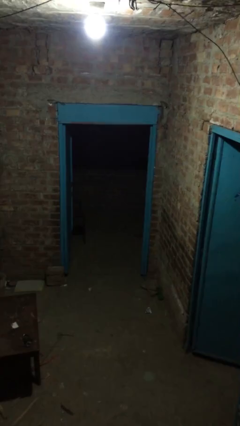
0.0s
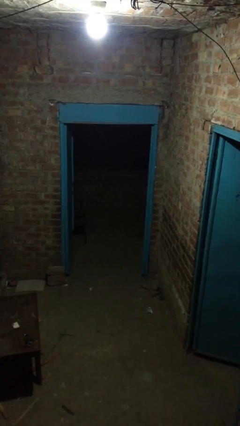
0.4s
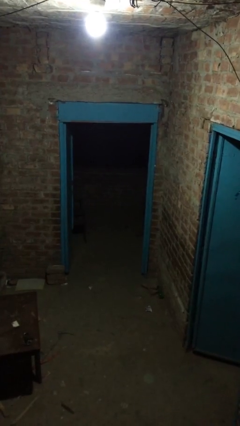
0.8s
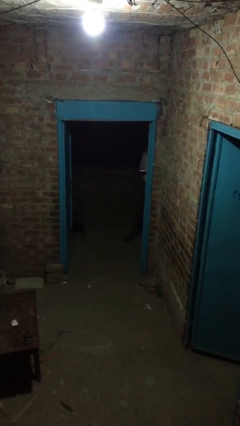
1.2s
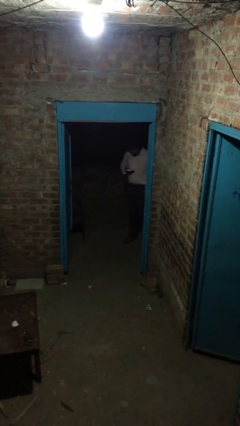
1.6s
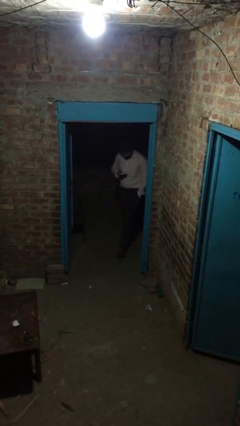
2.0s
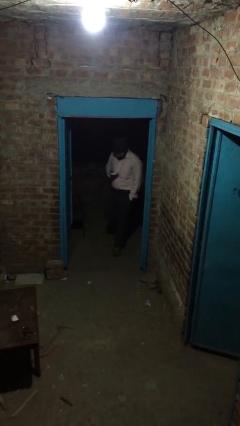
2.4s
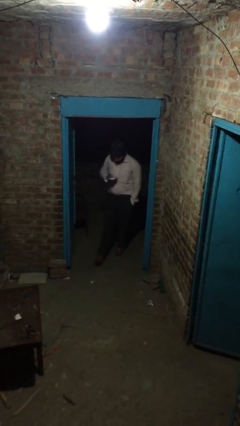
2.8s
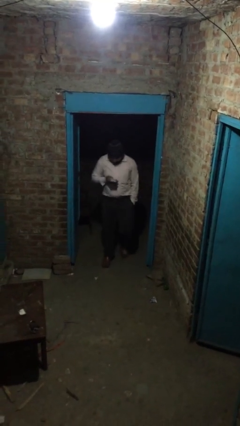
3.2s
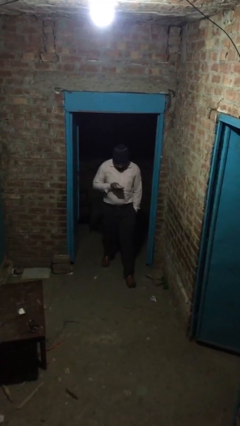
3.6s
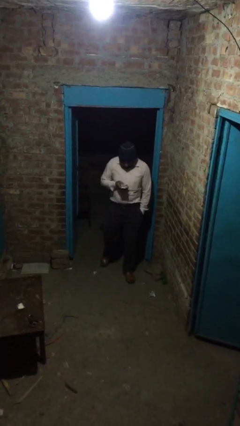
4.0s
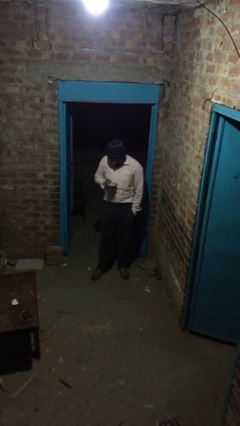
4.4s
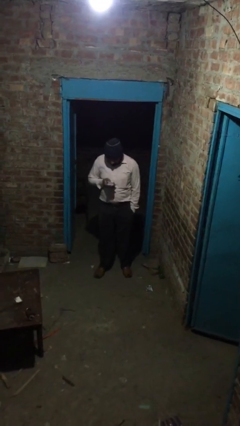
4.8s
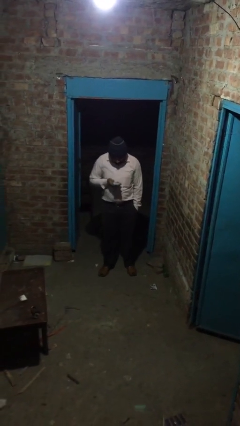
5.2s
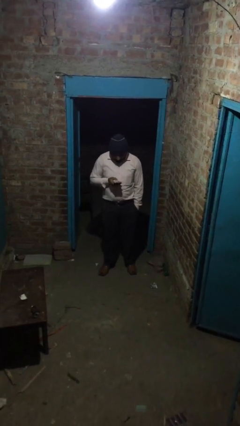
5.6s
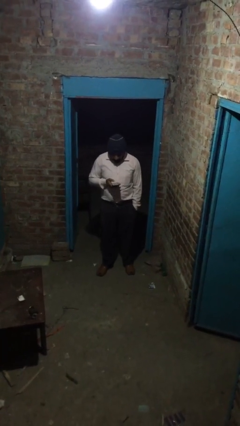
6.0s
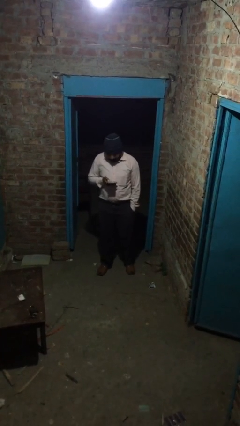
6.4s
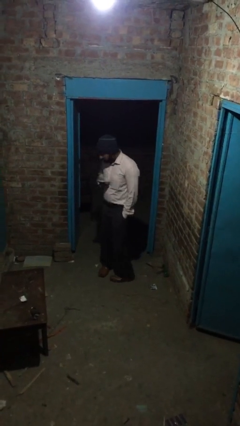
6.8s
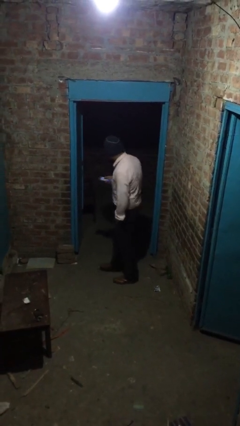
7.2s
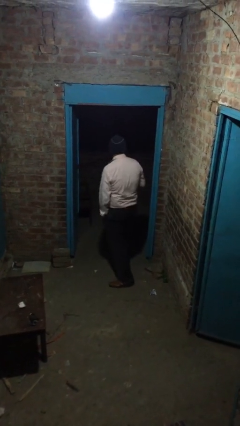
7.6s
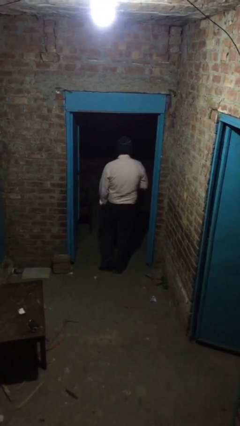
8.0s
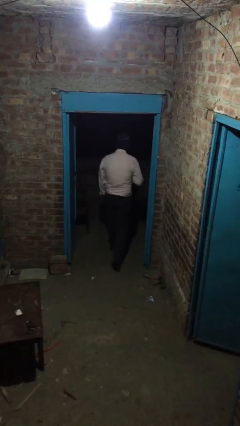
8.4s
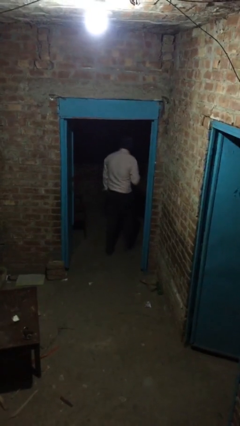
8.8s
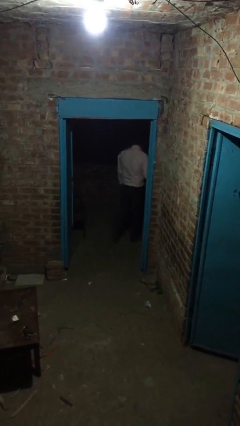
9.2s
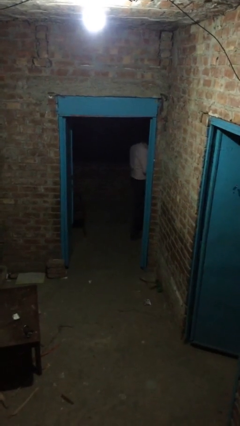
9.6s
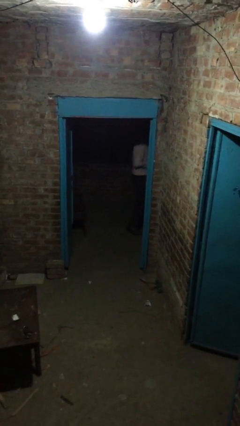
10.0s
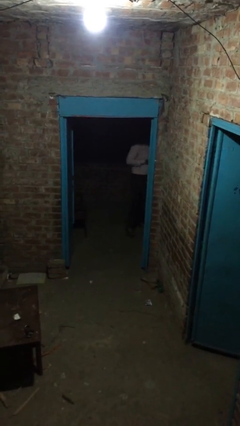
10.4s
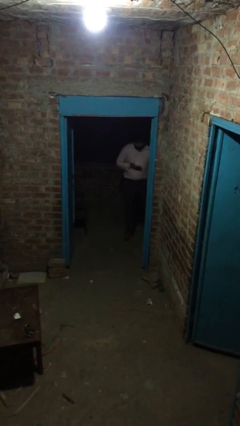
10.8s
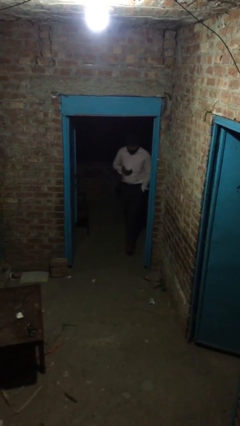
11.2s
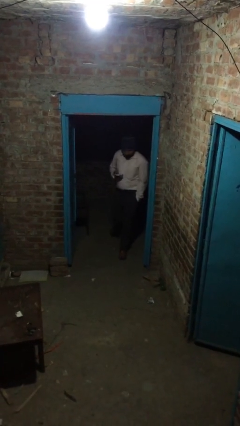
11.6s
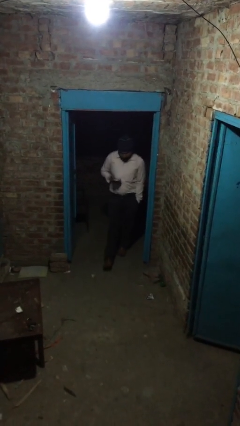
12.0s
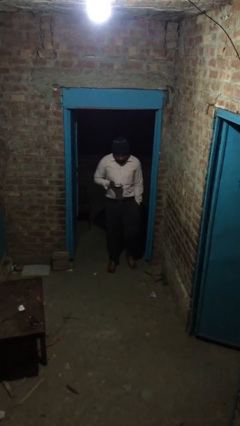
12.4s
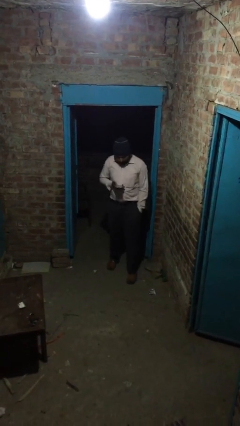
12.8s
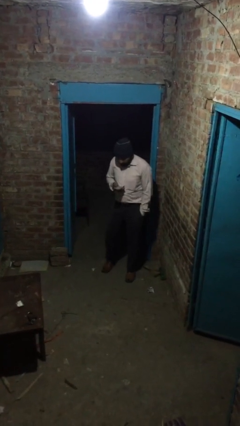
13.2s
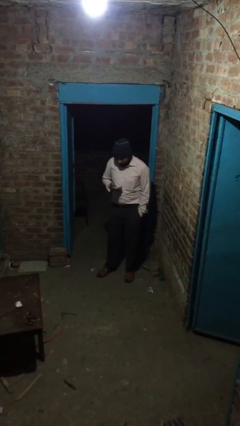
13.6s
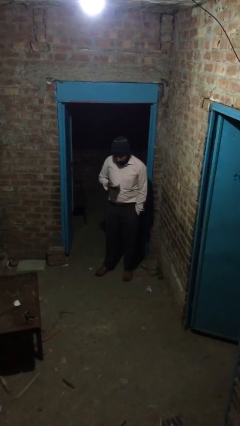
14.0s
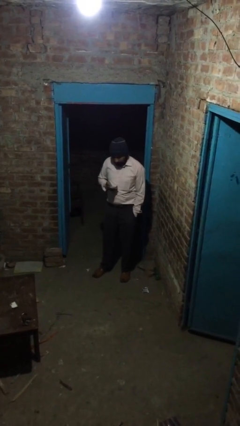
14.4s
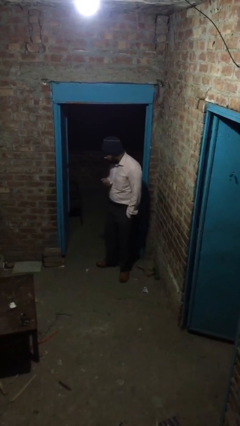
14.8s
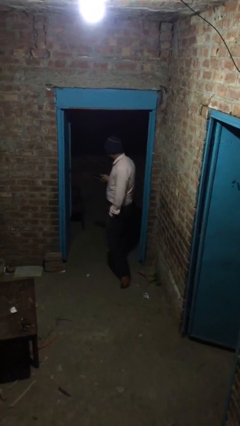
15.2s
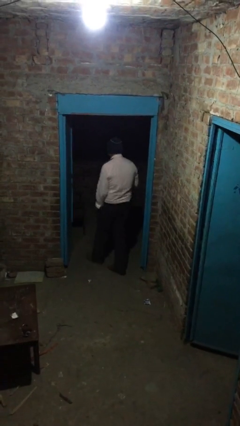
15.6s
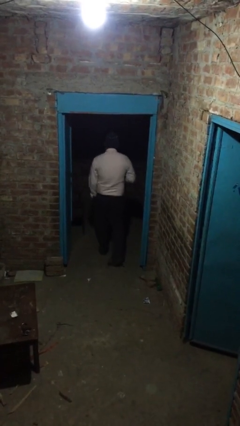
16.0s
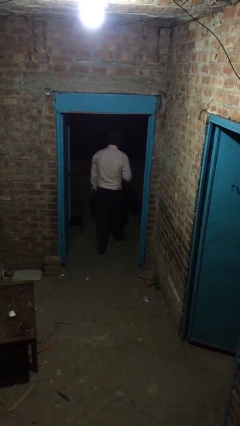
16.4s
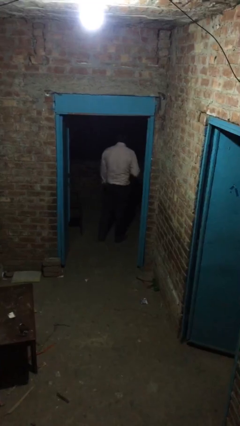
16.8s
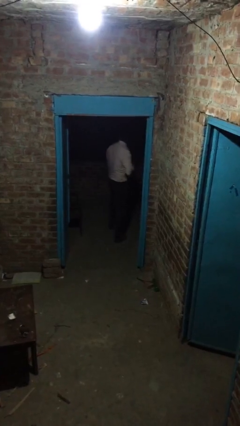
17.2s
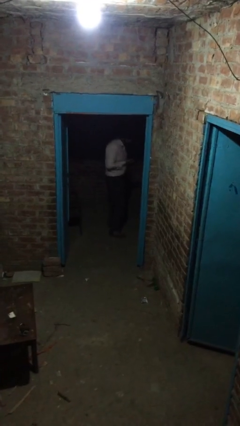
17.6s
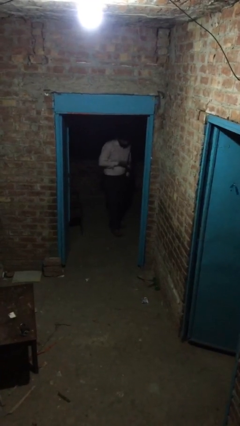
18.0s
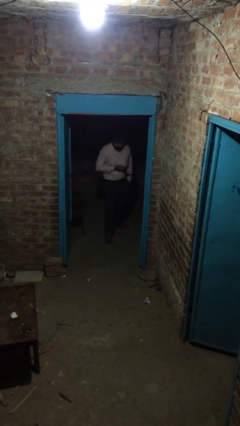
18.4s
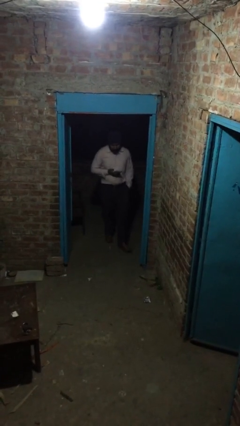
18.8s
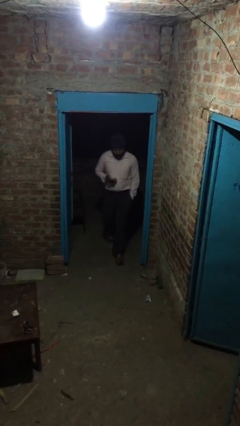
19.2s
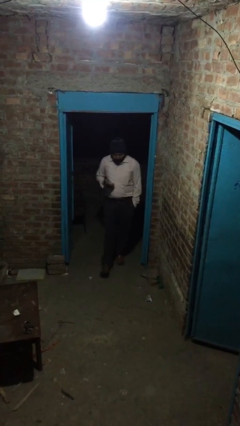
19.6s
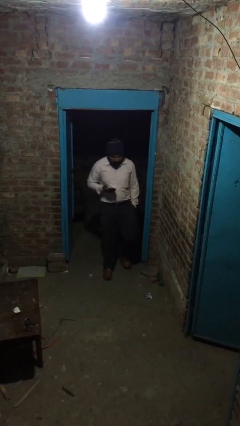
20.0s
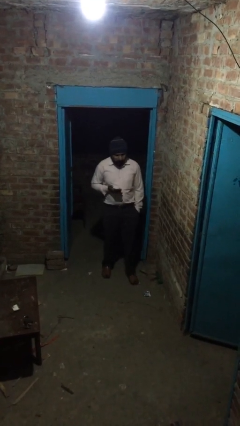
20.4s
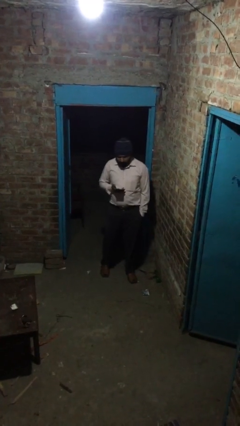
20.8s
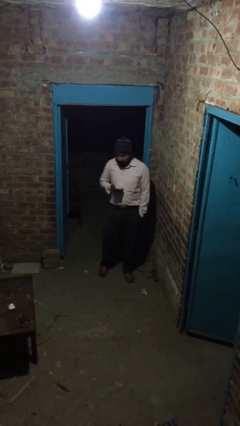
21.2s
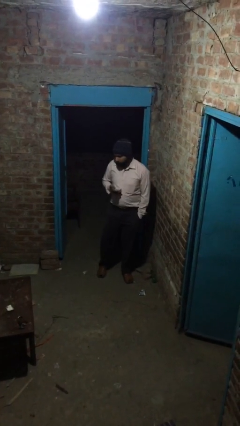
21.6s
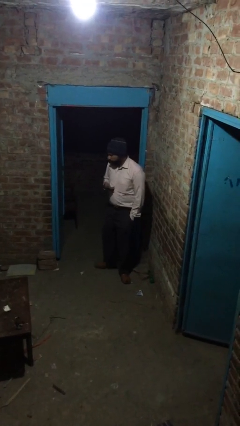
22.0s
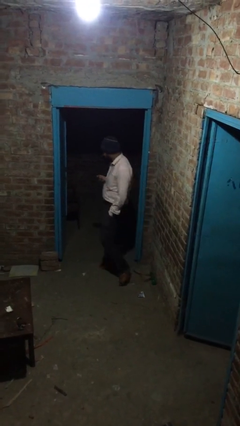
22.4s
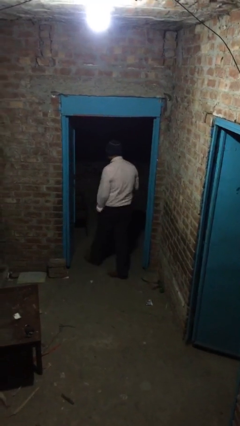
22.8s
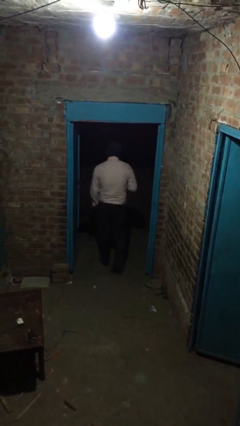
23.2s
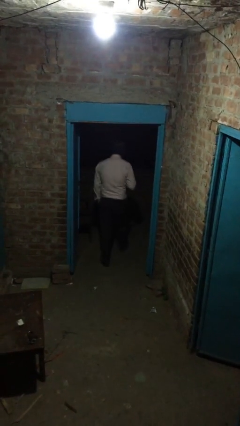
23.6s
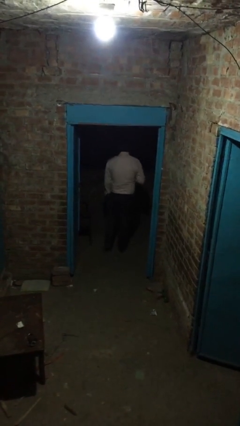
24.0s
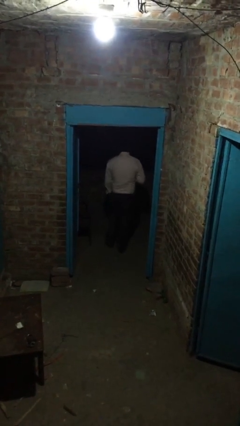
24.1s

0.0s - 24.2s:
person texts on phone

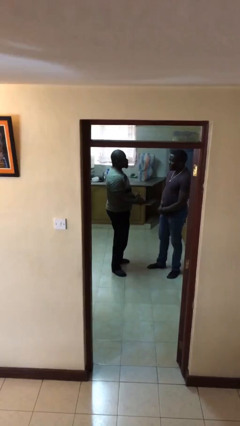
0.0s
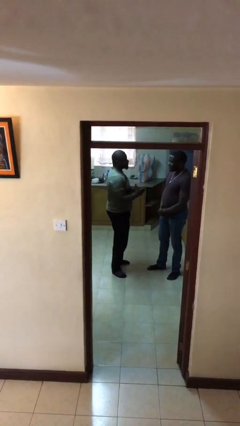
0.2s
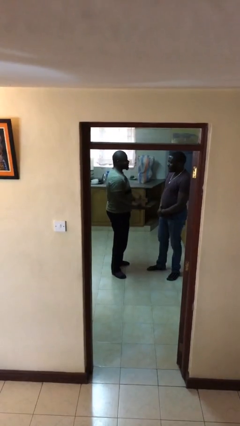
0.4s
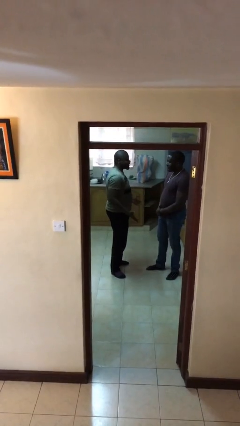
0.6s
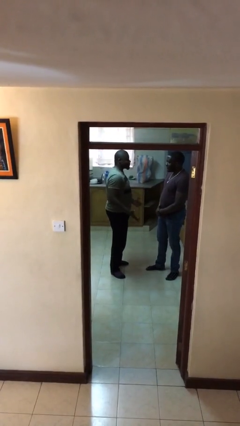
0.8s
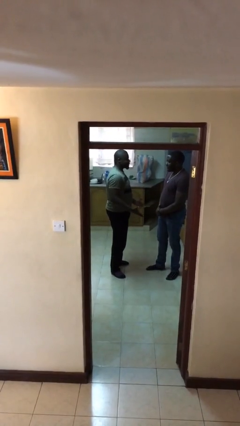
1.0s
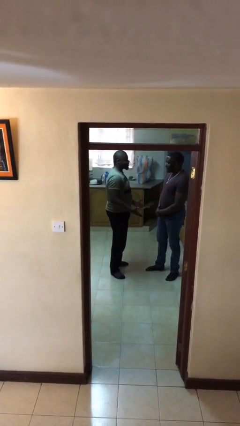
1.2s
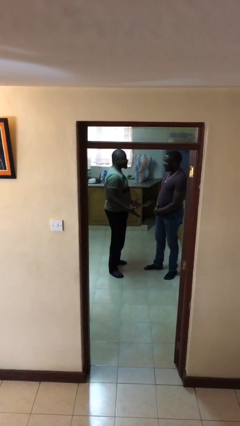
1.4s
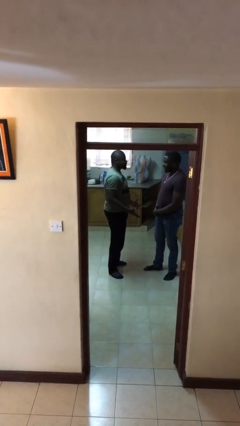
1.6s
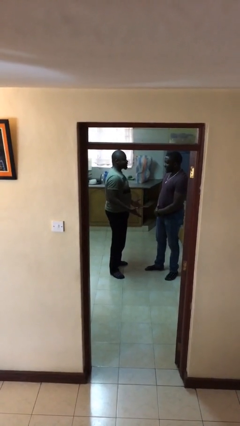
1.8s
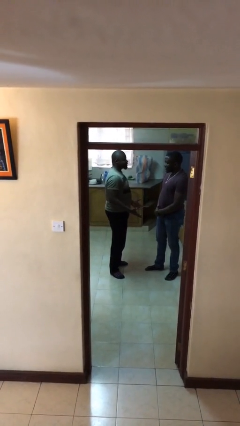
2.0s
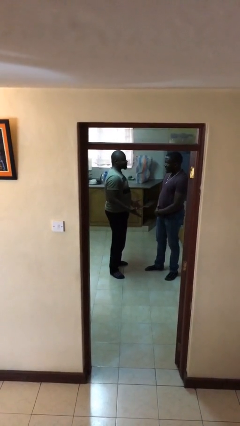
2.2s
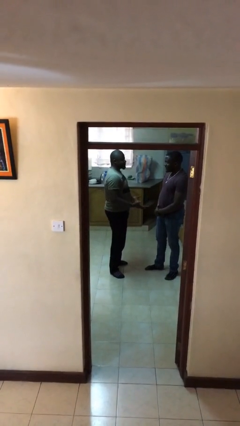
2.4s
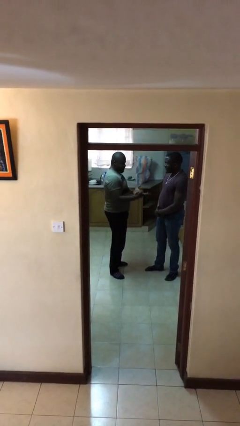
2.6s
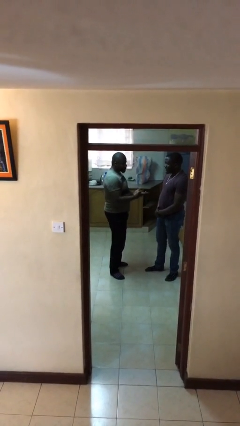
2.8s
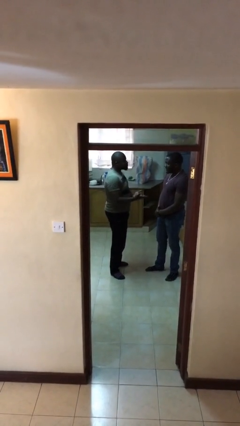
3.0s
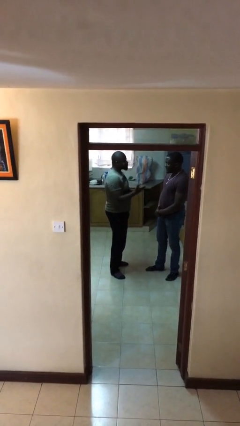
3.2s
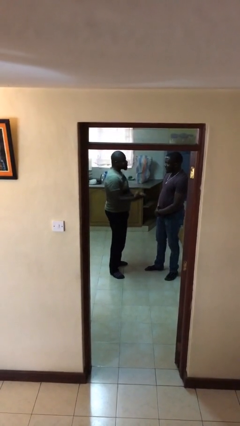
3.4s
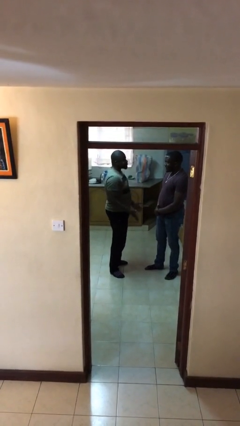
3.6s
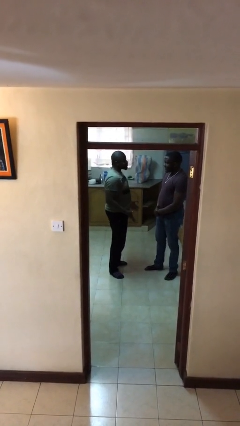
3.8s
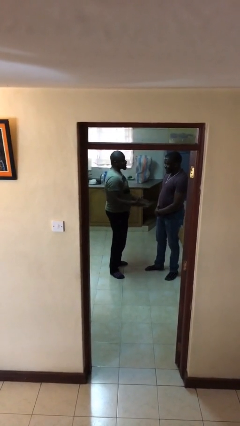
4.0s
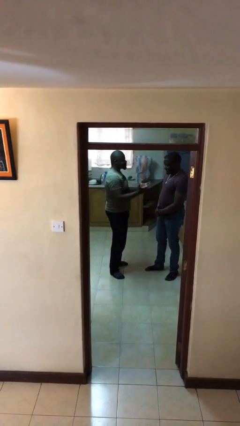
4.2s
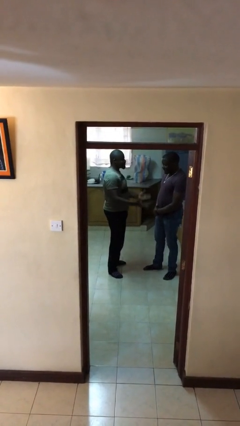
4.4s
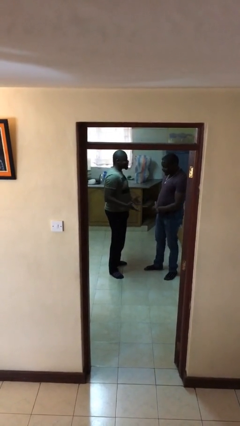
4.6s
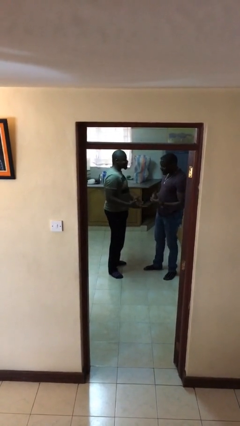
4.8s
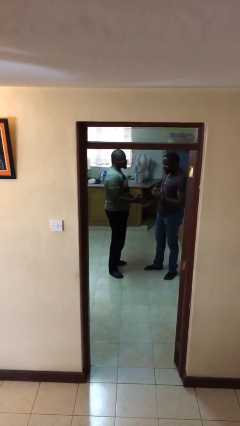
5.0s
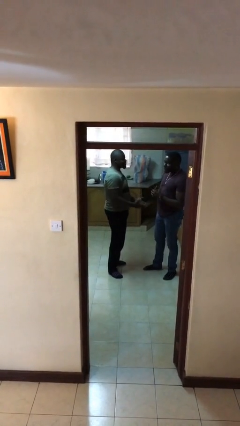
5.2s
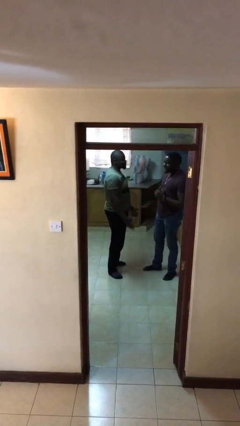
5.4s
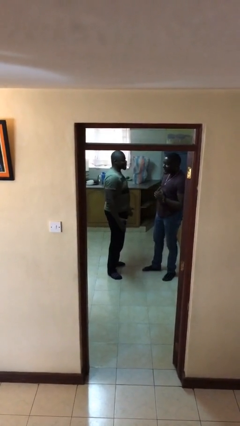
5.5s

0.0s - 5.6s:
person talks to person

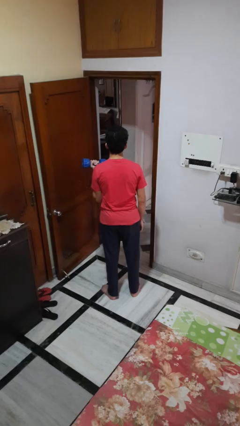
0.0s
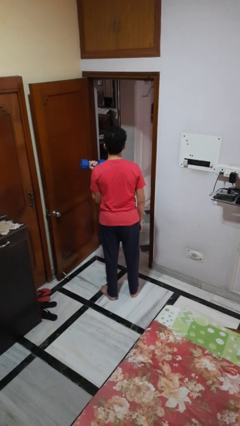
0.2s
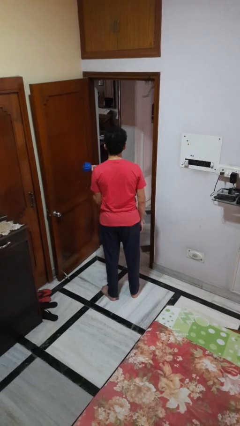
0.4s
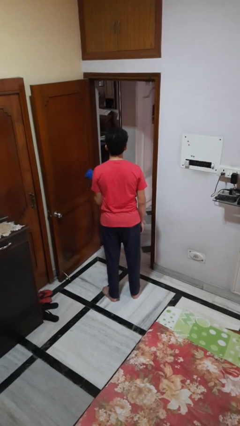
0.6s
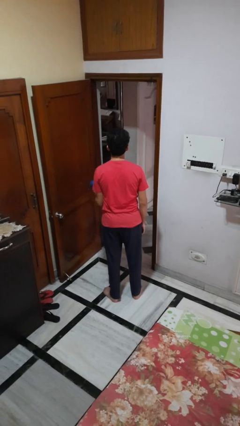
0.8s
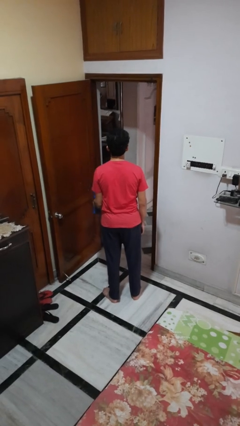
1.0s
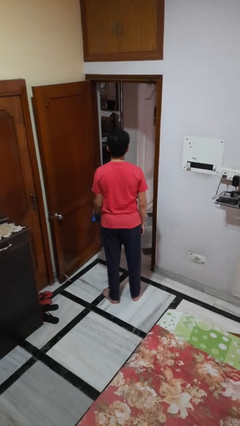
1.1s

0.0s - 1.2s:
person lifts dumbbells
